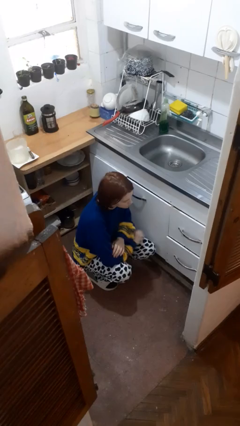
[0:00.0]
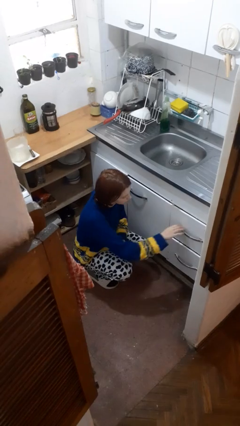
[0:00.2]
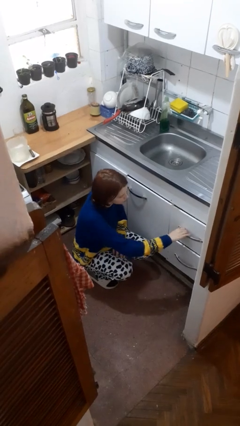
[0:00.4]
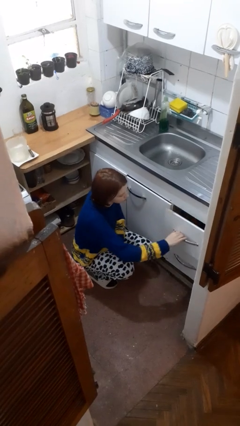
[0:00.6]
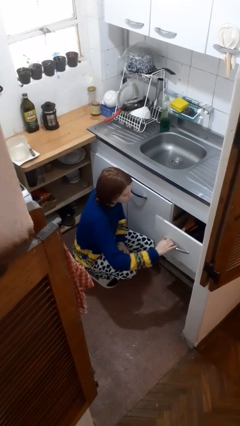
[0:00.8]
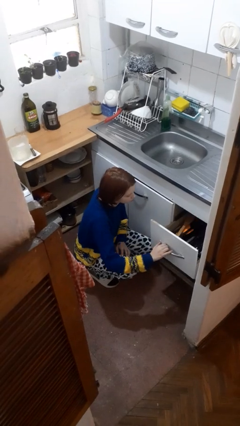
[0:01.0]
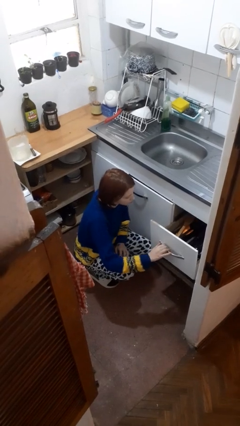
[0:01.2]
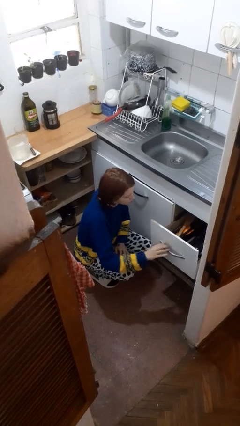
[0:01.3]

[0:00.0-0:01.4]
person opens kitchen drawer

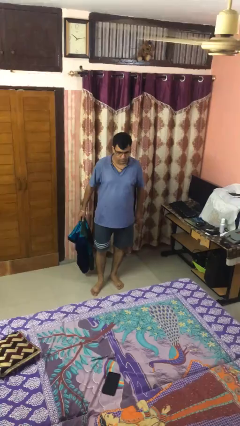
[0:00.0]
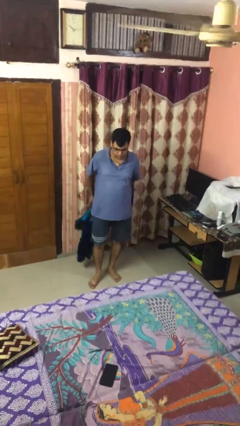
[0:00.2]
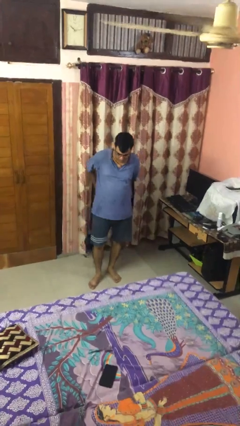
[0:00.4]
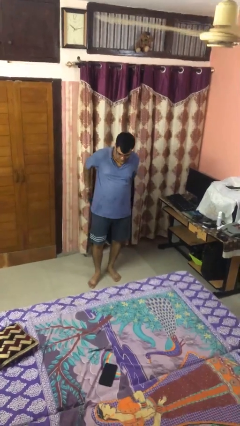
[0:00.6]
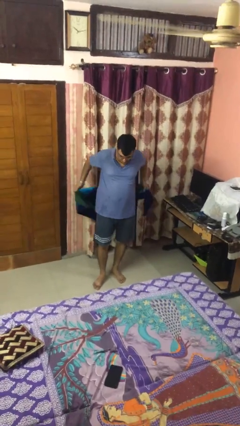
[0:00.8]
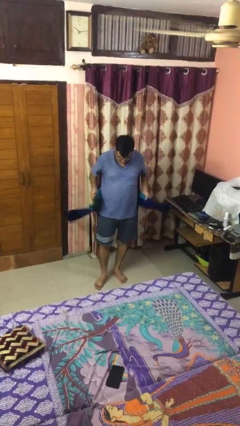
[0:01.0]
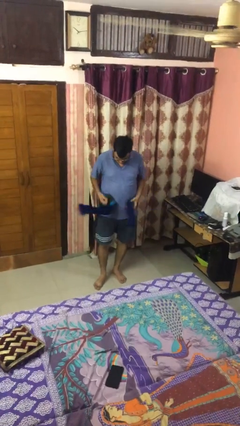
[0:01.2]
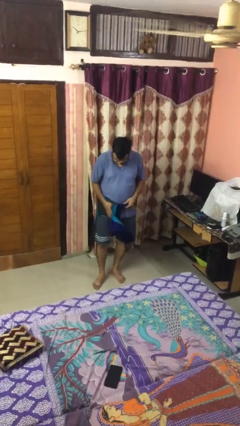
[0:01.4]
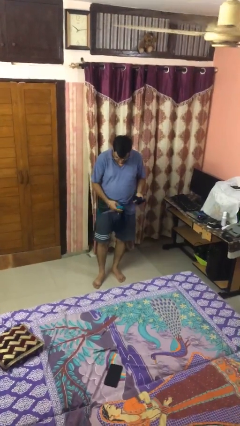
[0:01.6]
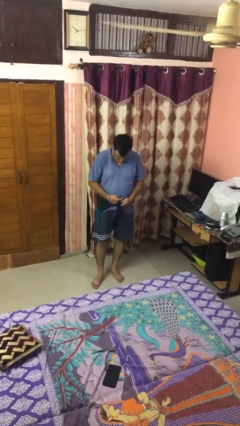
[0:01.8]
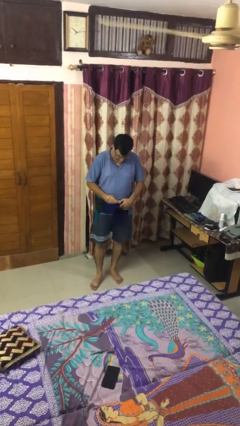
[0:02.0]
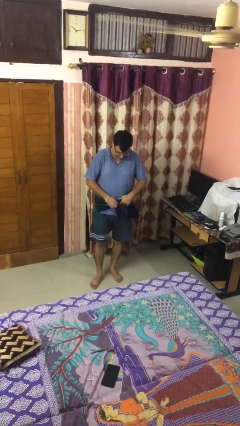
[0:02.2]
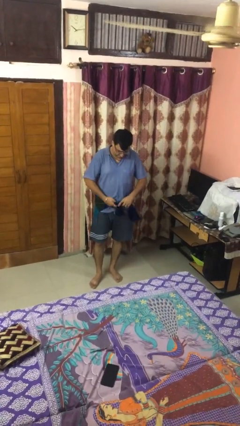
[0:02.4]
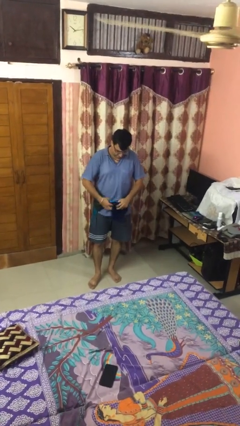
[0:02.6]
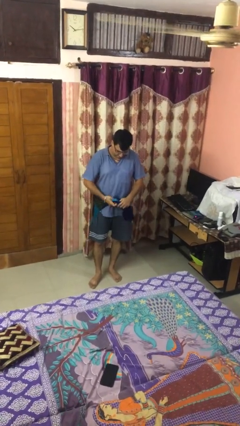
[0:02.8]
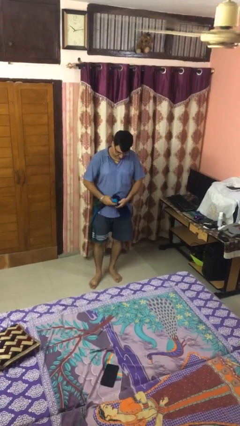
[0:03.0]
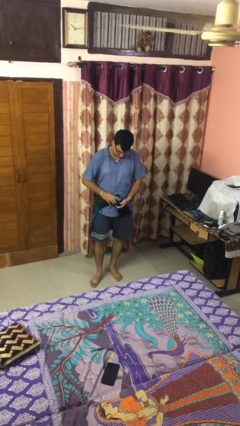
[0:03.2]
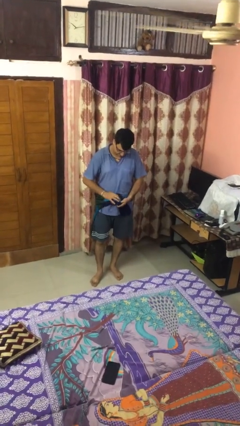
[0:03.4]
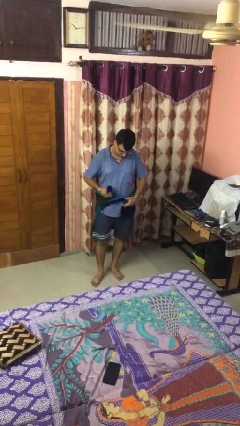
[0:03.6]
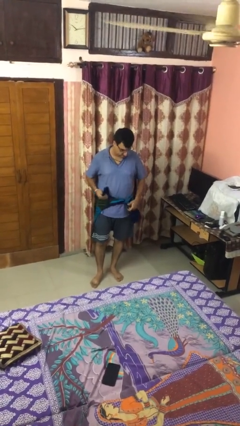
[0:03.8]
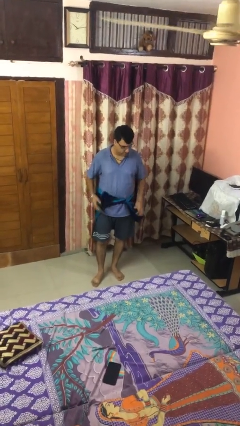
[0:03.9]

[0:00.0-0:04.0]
person ties jacket around waist

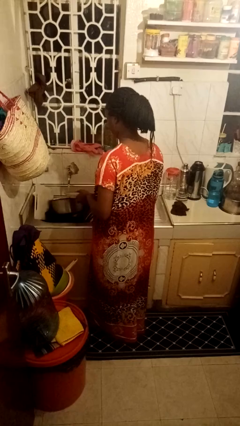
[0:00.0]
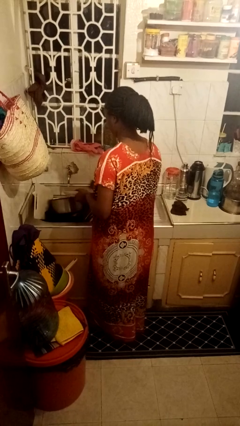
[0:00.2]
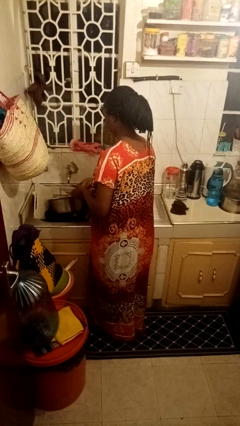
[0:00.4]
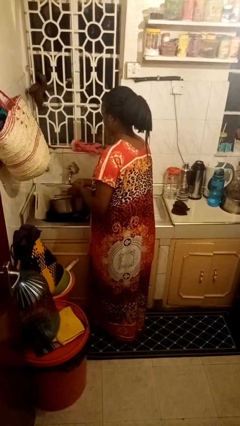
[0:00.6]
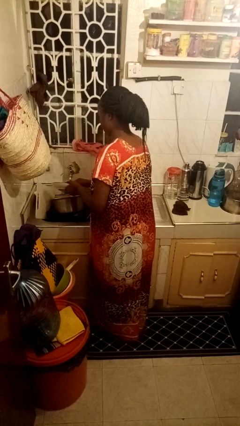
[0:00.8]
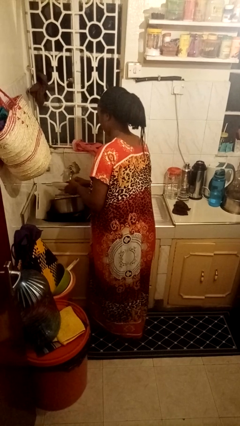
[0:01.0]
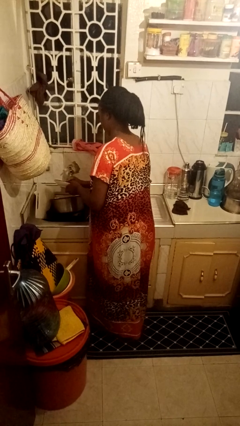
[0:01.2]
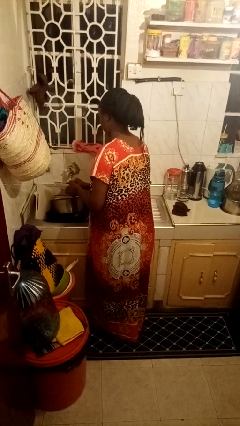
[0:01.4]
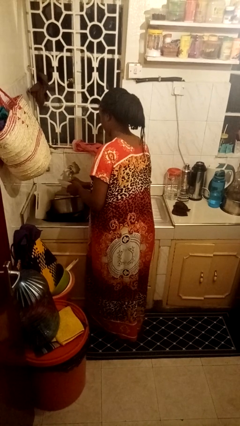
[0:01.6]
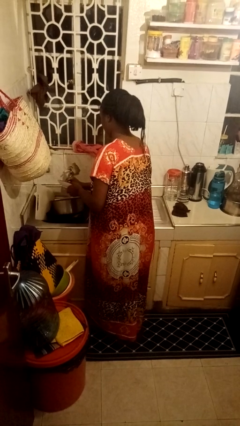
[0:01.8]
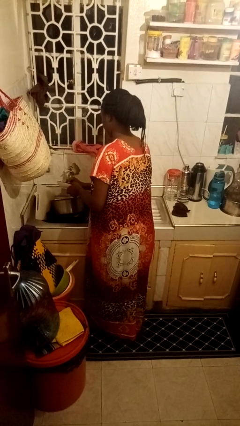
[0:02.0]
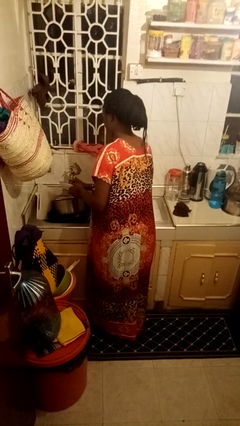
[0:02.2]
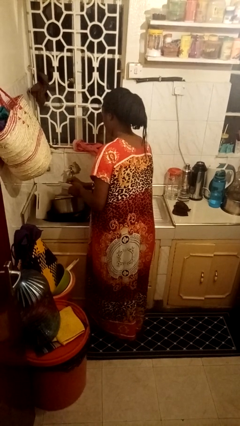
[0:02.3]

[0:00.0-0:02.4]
person washes dish

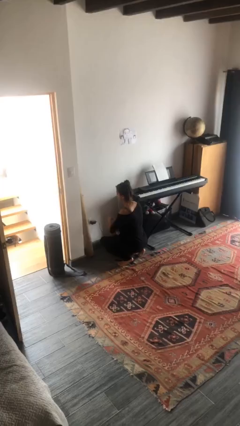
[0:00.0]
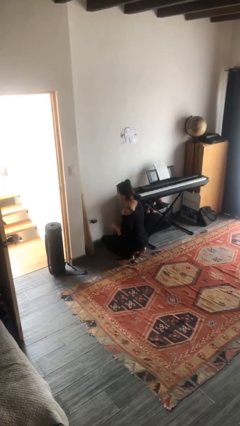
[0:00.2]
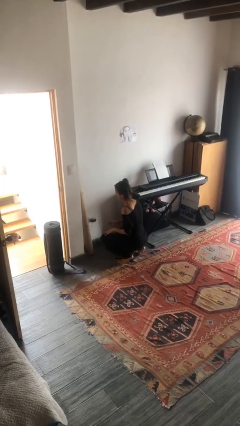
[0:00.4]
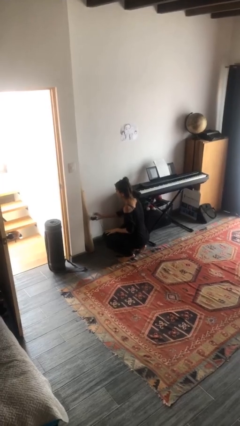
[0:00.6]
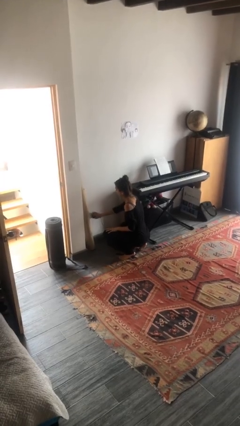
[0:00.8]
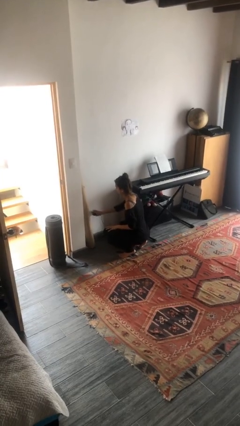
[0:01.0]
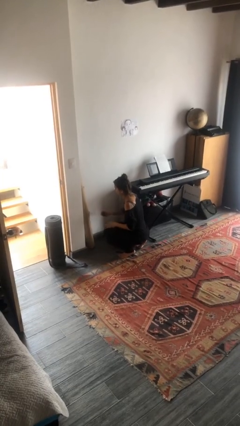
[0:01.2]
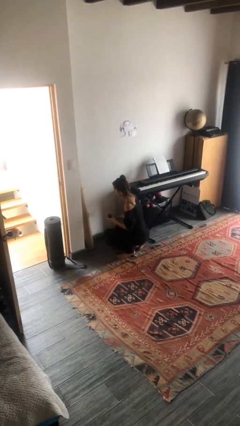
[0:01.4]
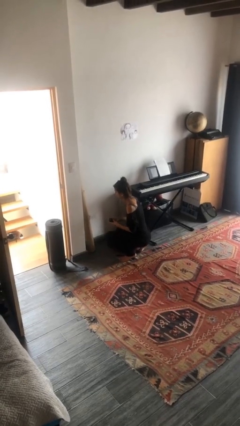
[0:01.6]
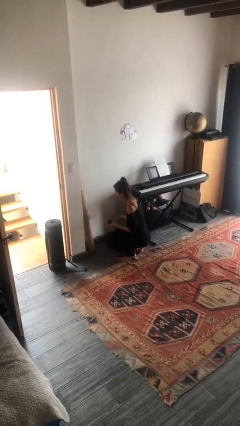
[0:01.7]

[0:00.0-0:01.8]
person unplugs from electrical socket

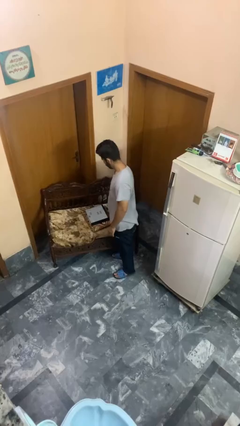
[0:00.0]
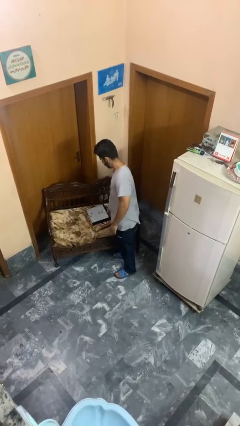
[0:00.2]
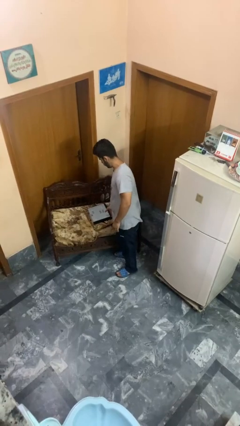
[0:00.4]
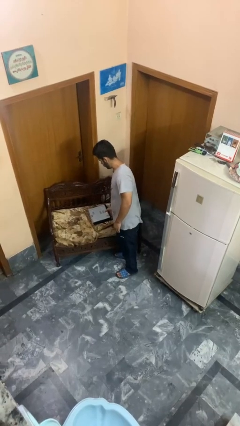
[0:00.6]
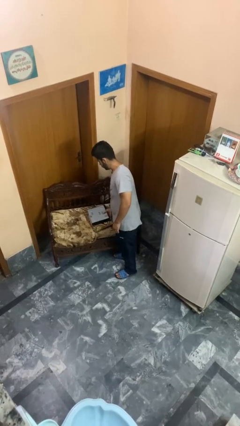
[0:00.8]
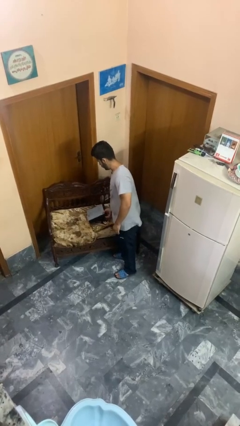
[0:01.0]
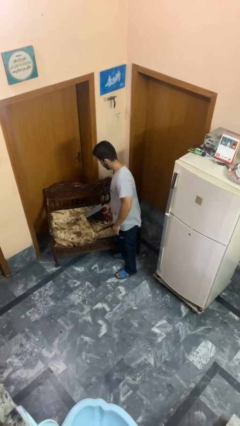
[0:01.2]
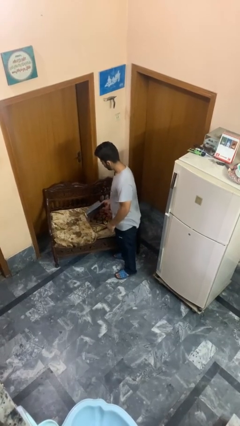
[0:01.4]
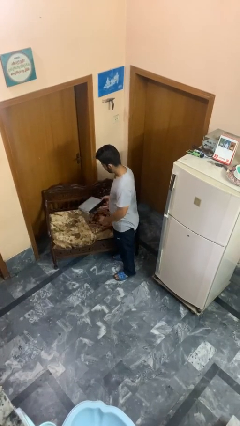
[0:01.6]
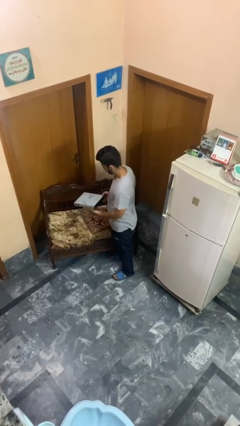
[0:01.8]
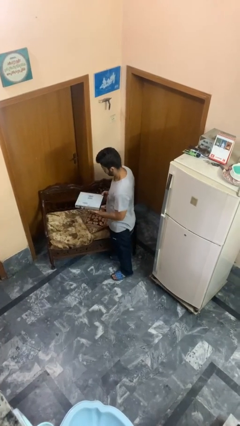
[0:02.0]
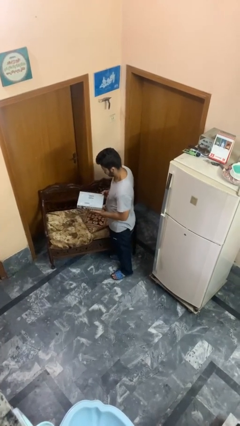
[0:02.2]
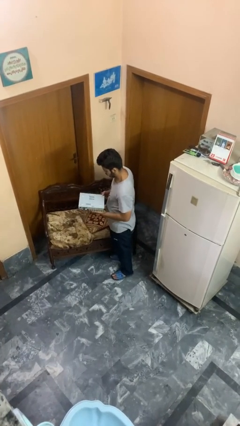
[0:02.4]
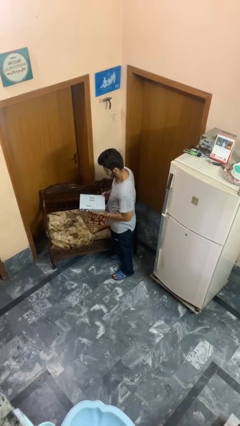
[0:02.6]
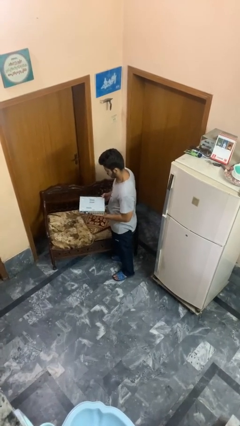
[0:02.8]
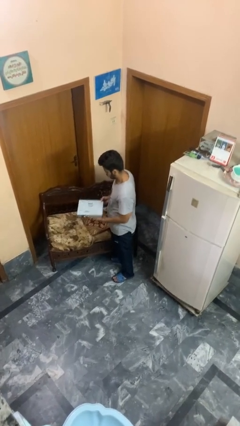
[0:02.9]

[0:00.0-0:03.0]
person picks up object from couch

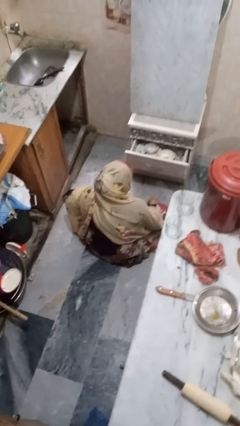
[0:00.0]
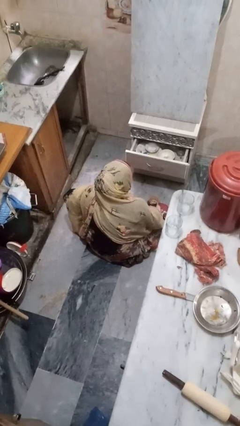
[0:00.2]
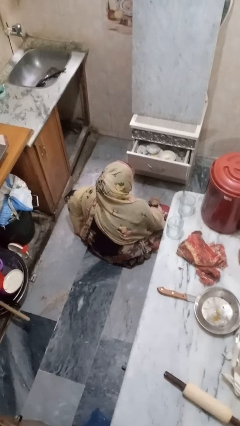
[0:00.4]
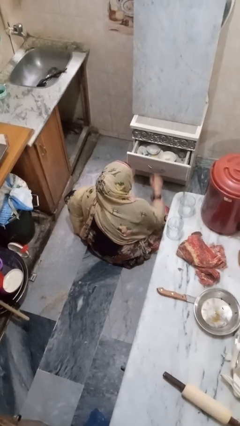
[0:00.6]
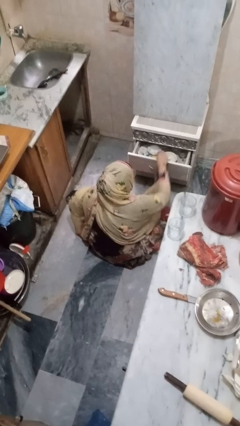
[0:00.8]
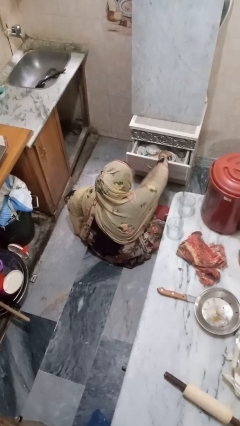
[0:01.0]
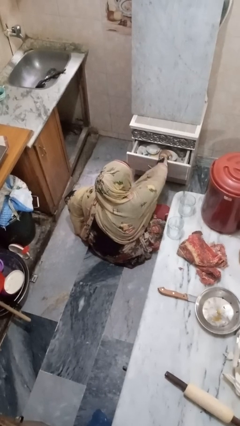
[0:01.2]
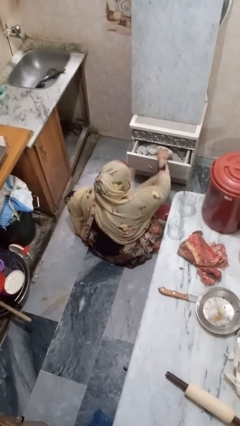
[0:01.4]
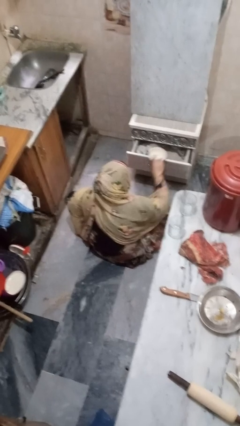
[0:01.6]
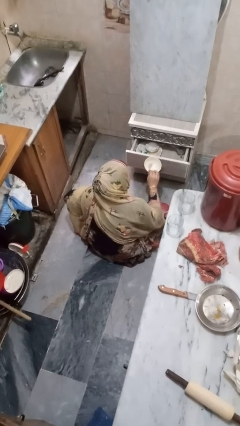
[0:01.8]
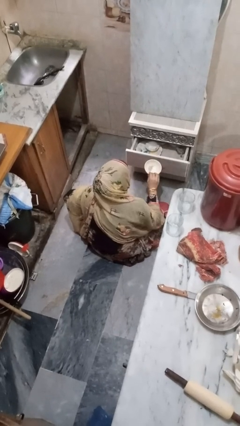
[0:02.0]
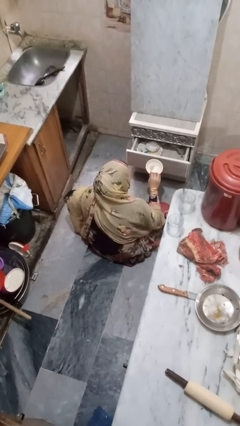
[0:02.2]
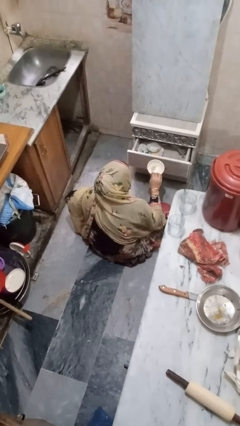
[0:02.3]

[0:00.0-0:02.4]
person takes object from kitchen drawer

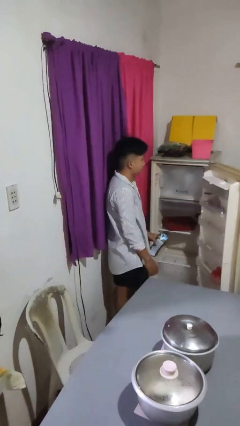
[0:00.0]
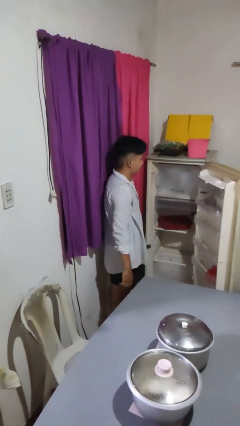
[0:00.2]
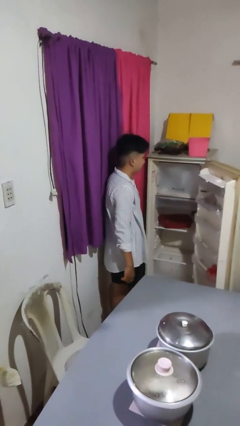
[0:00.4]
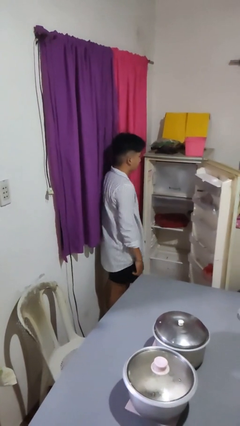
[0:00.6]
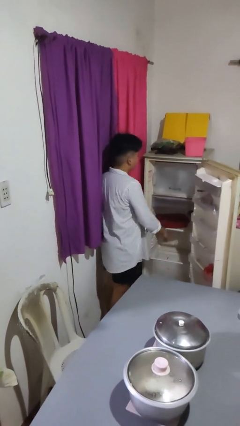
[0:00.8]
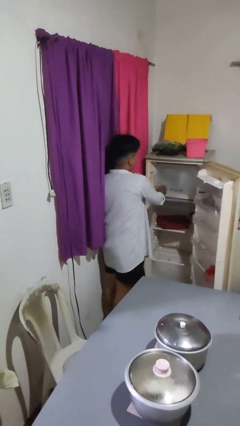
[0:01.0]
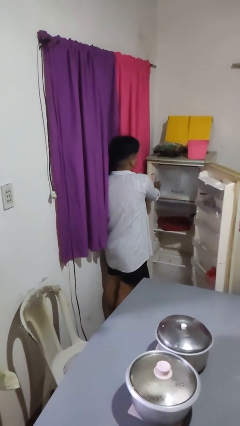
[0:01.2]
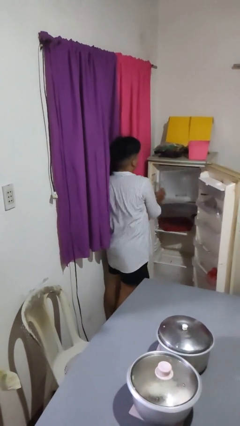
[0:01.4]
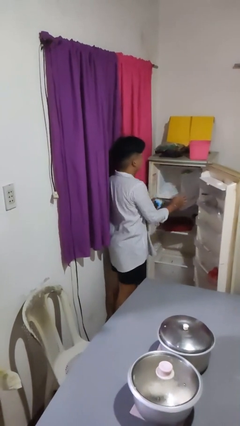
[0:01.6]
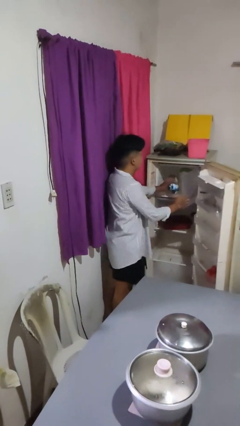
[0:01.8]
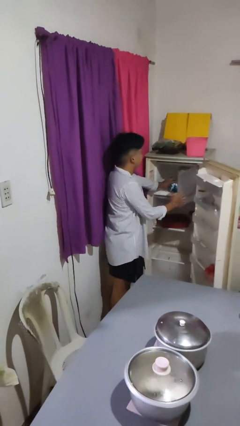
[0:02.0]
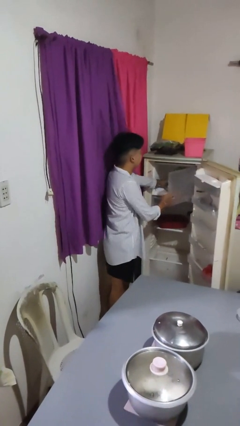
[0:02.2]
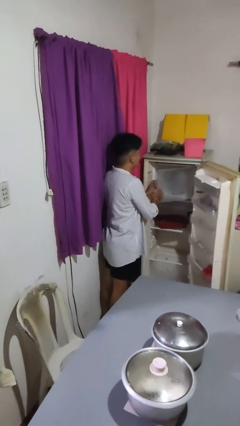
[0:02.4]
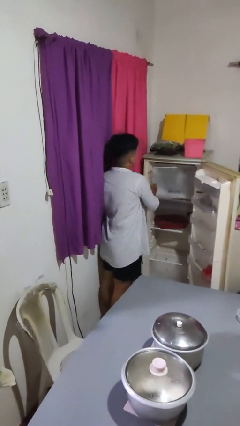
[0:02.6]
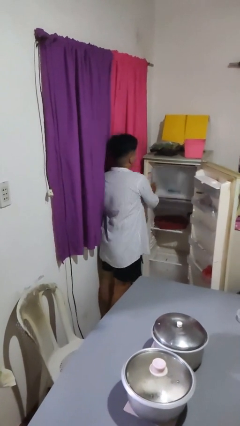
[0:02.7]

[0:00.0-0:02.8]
person puts object into refrigerator
